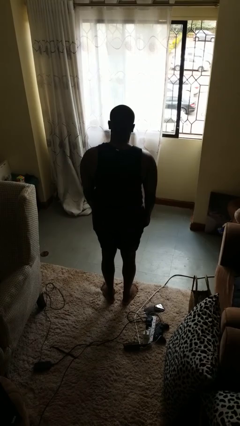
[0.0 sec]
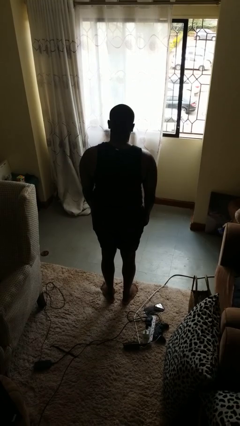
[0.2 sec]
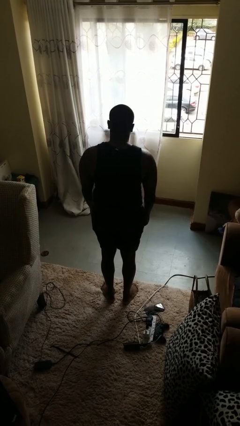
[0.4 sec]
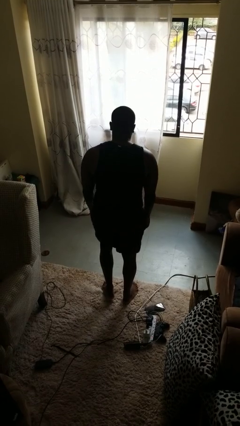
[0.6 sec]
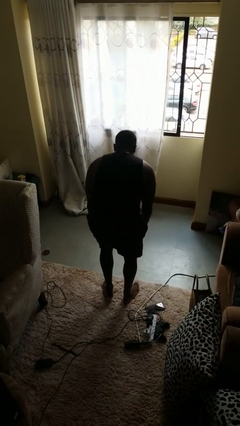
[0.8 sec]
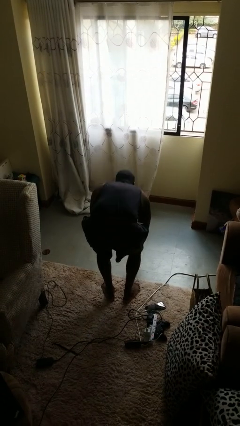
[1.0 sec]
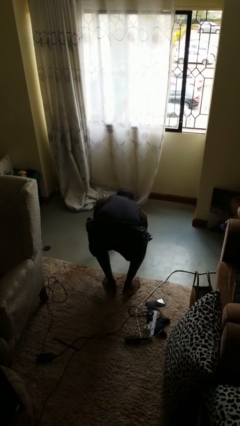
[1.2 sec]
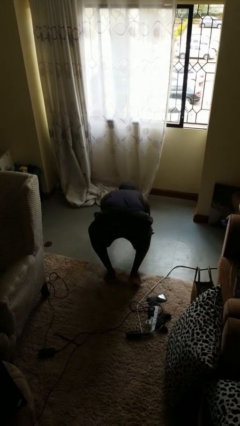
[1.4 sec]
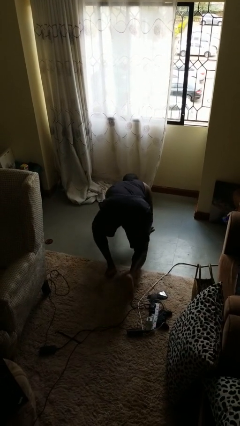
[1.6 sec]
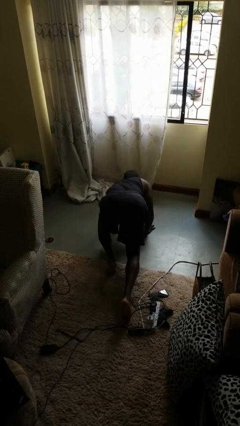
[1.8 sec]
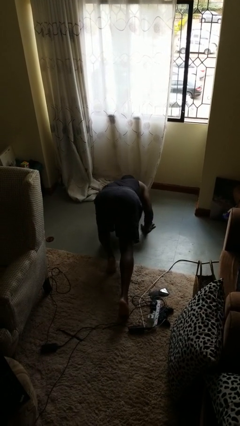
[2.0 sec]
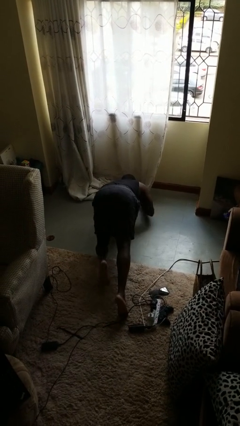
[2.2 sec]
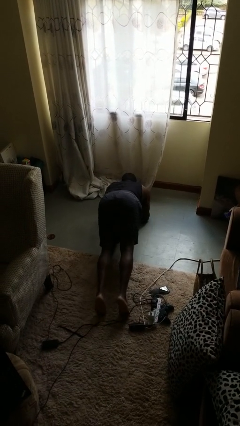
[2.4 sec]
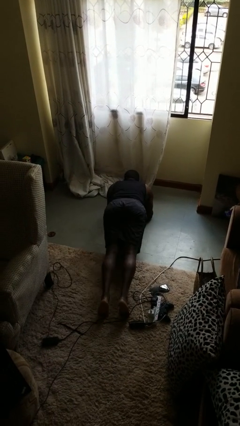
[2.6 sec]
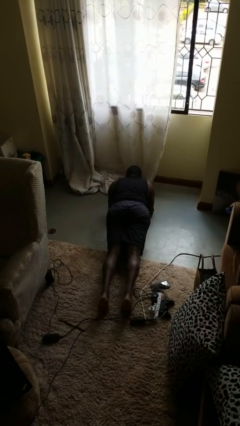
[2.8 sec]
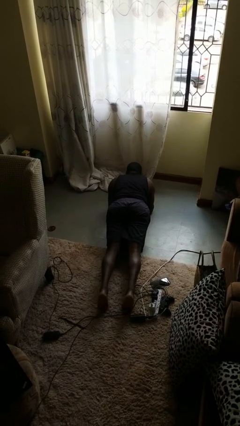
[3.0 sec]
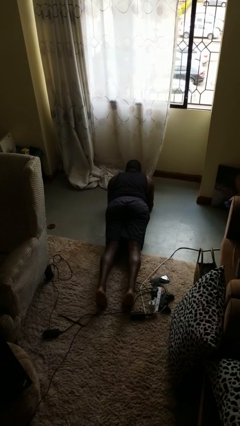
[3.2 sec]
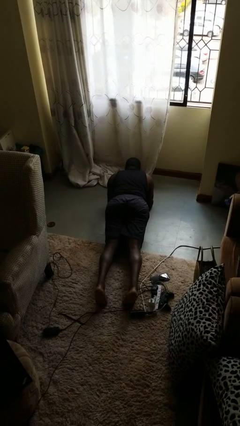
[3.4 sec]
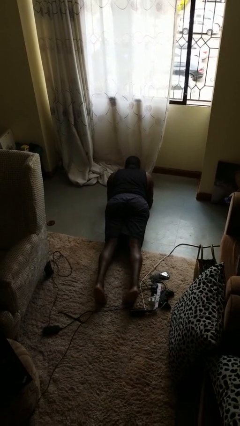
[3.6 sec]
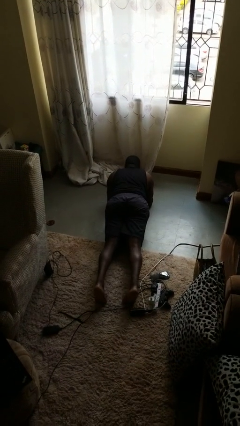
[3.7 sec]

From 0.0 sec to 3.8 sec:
person exercises with plank

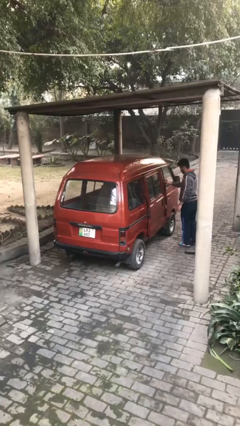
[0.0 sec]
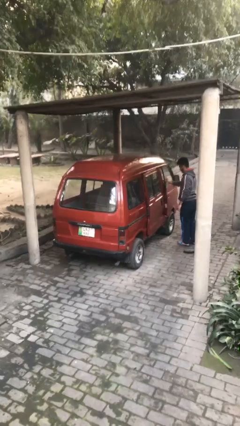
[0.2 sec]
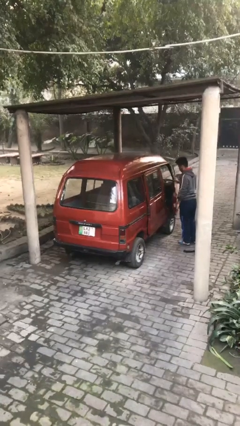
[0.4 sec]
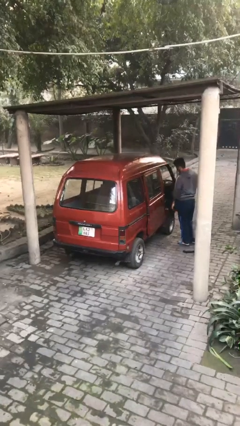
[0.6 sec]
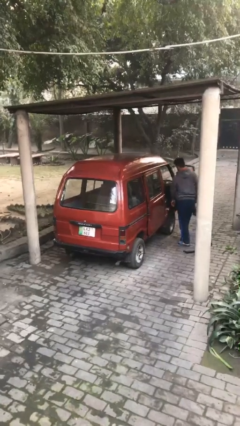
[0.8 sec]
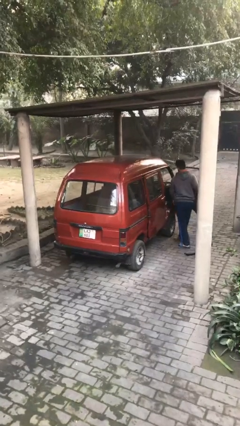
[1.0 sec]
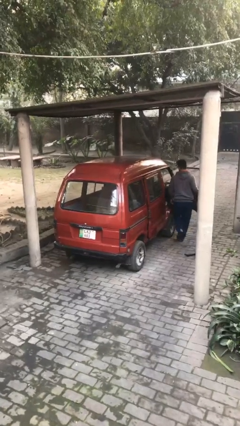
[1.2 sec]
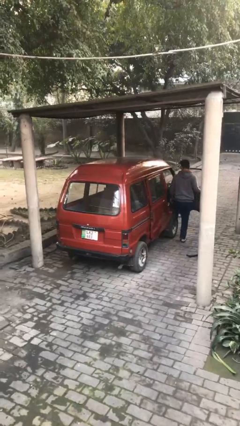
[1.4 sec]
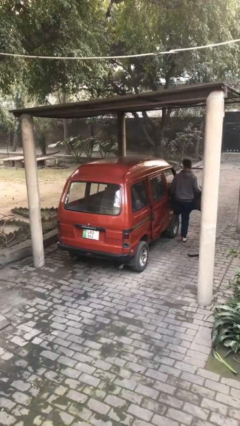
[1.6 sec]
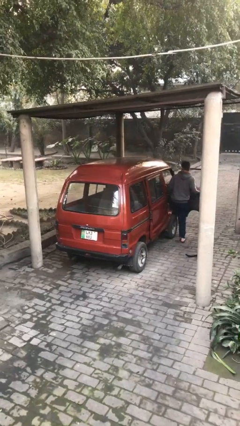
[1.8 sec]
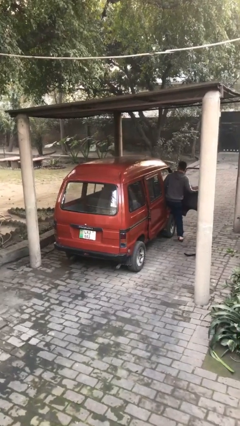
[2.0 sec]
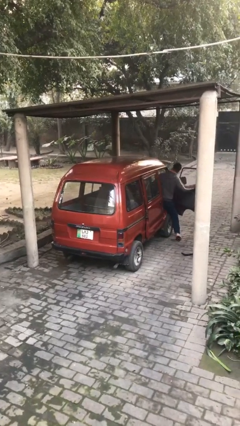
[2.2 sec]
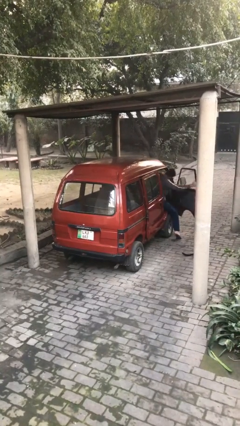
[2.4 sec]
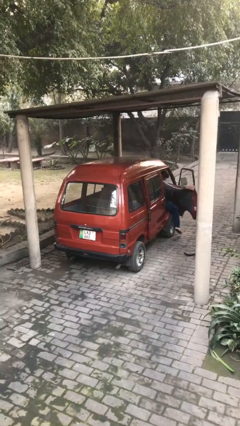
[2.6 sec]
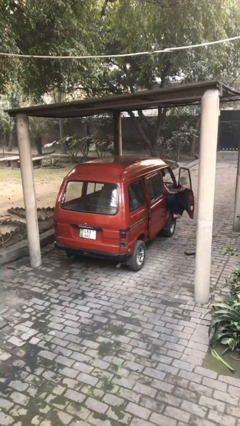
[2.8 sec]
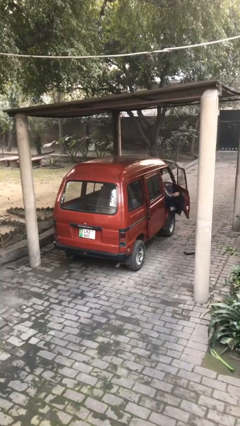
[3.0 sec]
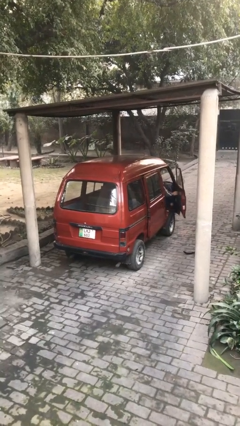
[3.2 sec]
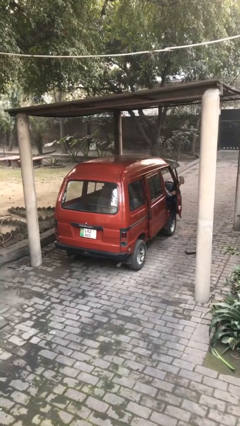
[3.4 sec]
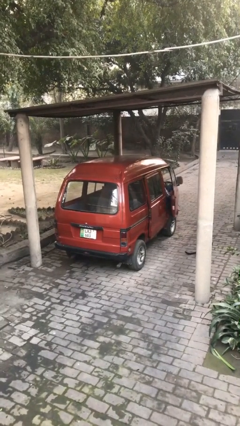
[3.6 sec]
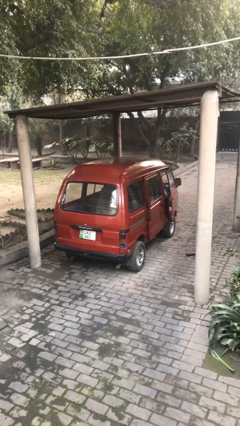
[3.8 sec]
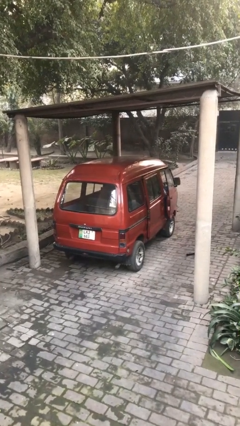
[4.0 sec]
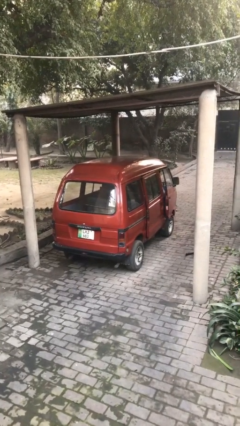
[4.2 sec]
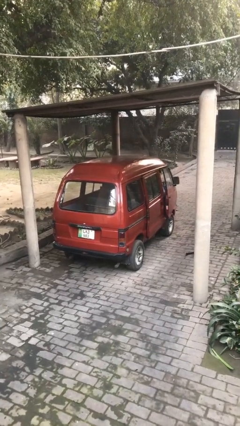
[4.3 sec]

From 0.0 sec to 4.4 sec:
car picks up person

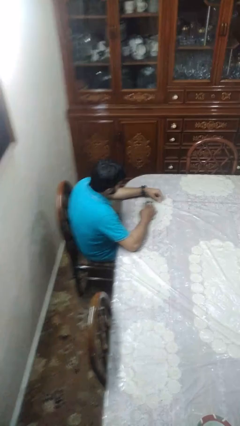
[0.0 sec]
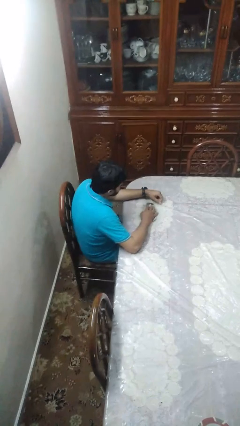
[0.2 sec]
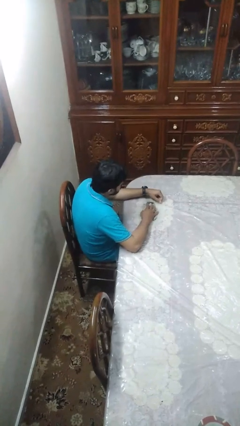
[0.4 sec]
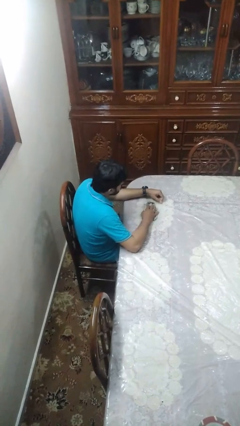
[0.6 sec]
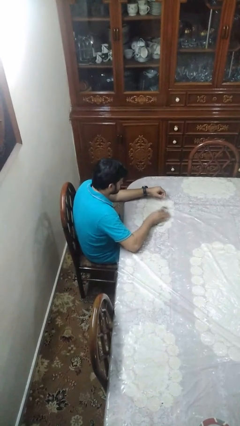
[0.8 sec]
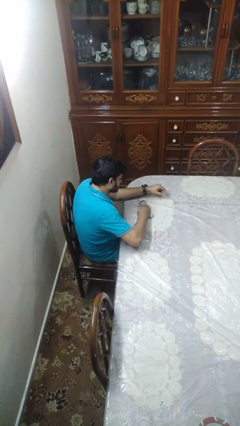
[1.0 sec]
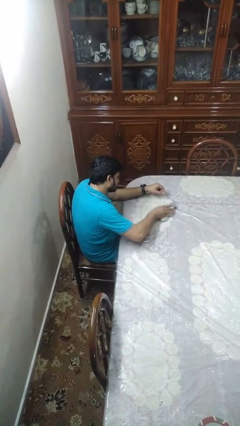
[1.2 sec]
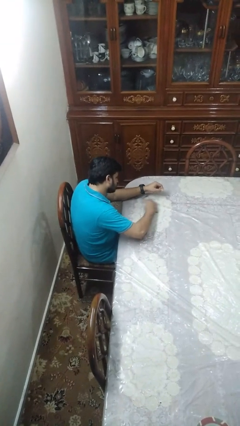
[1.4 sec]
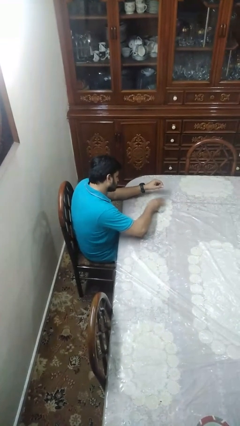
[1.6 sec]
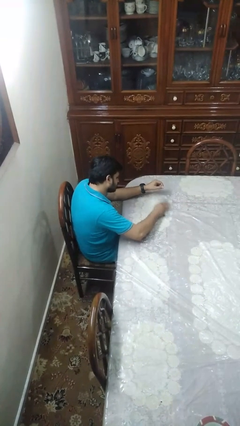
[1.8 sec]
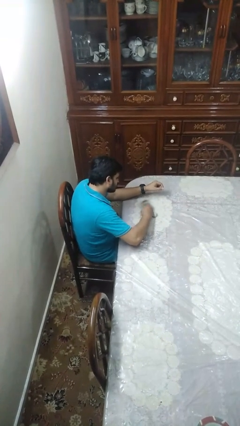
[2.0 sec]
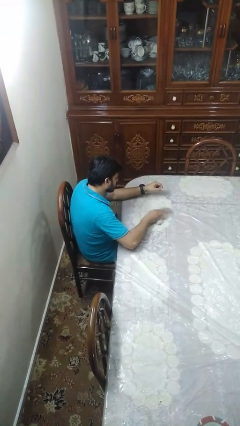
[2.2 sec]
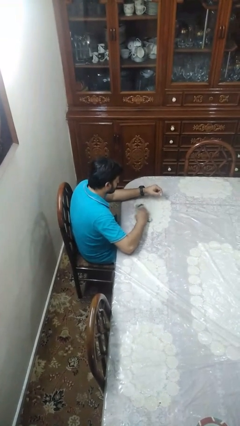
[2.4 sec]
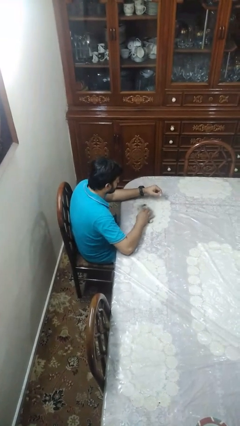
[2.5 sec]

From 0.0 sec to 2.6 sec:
person cleans table with rag

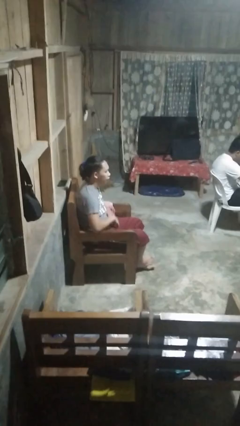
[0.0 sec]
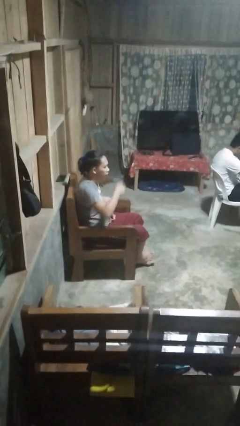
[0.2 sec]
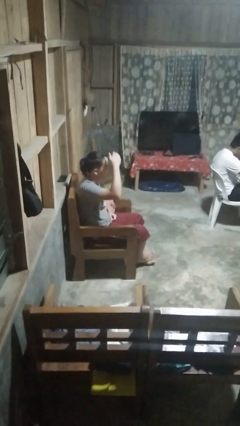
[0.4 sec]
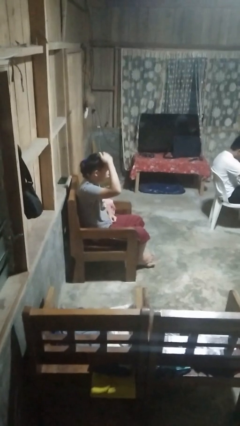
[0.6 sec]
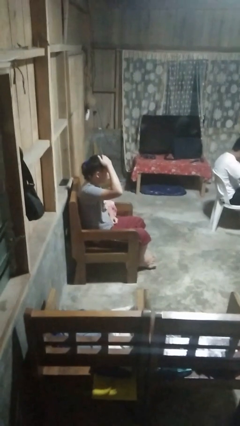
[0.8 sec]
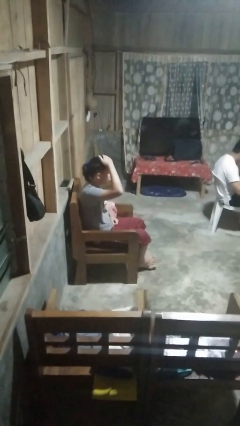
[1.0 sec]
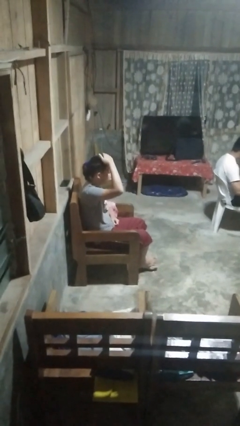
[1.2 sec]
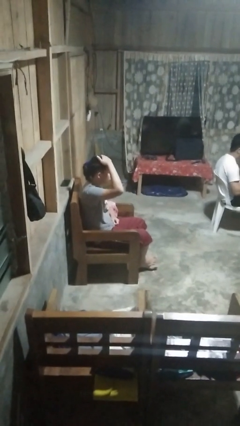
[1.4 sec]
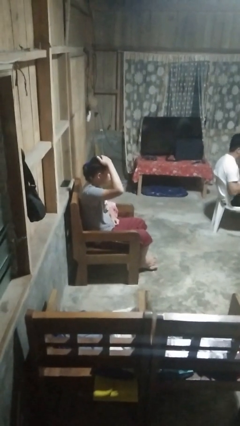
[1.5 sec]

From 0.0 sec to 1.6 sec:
person pats head

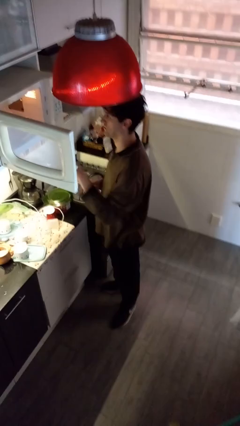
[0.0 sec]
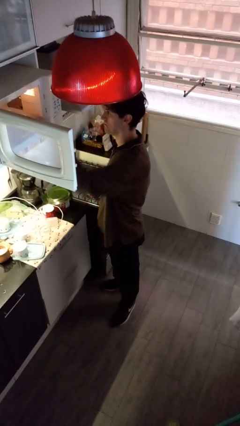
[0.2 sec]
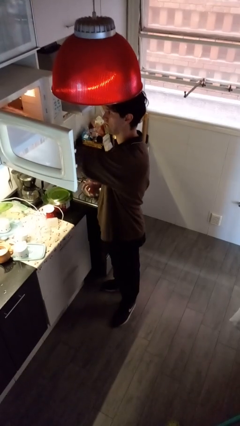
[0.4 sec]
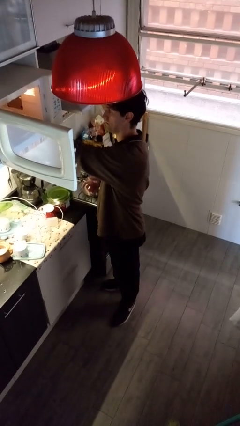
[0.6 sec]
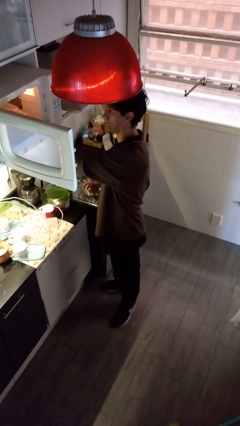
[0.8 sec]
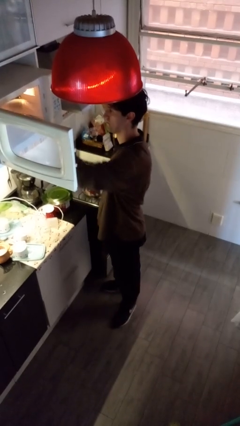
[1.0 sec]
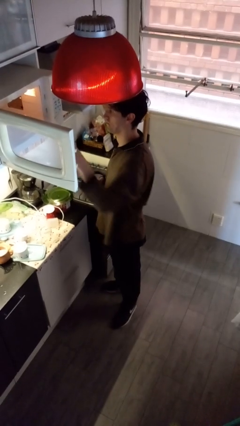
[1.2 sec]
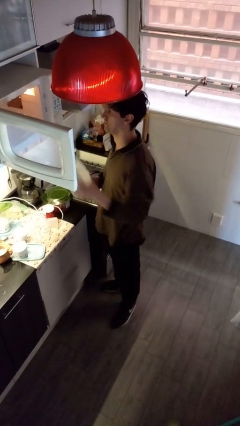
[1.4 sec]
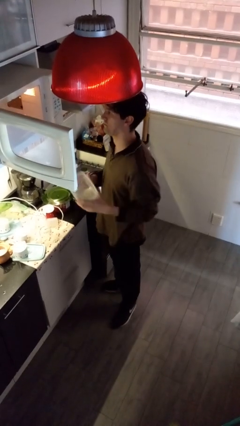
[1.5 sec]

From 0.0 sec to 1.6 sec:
person takes object from microwave

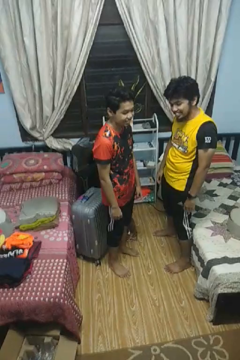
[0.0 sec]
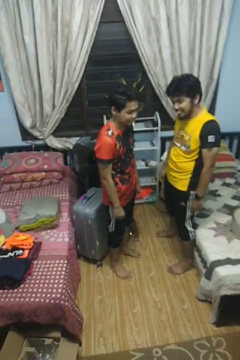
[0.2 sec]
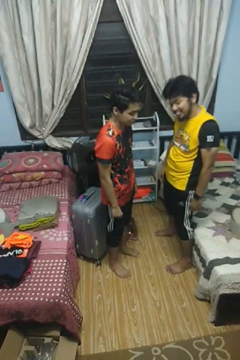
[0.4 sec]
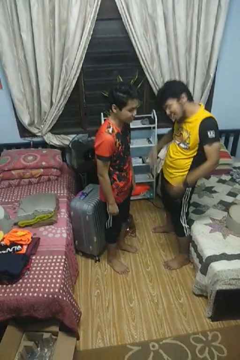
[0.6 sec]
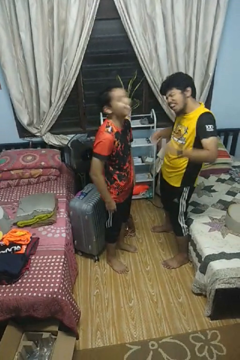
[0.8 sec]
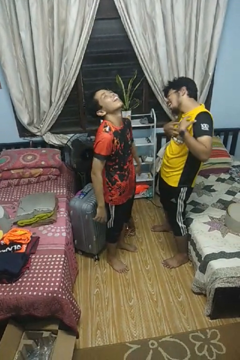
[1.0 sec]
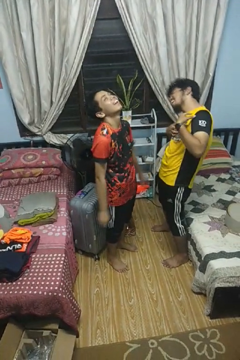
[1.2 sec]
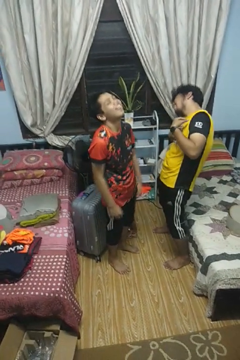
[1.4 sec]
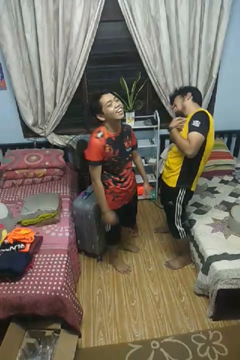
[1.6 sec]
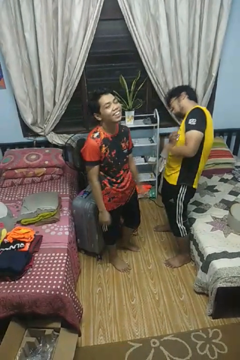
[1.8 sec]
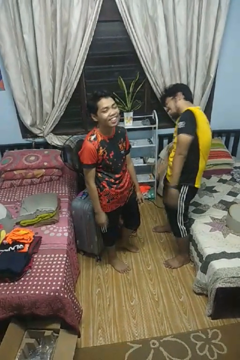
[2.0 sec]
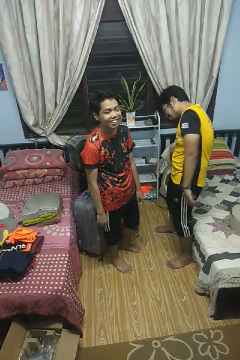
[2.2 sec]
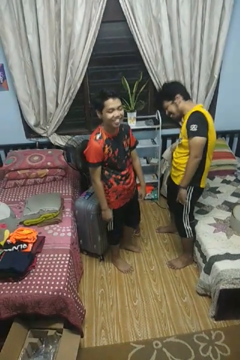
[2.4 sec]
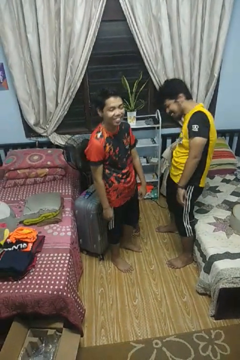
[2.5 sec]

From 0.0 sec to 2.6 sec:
person laughs with person

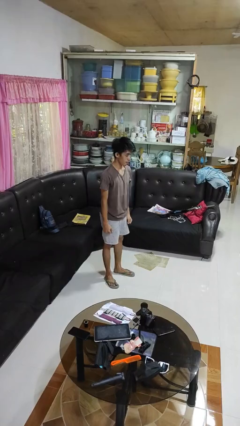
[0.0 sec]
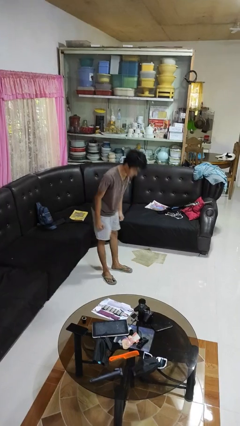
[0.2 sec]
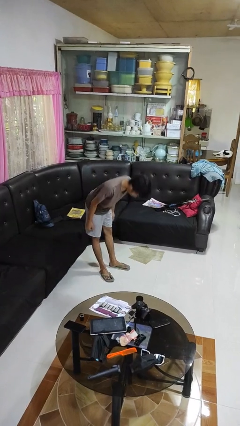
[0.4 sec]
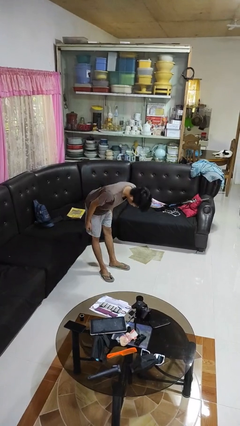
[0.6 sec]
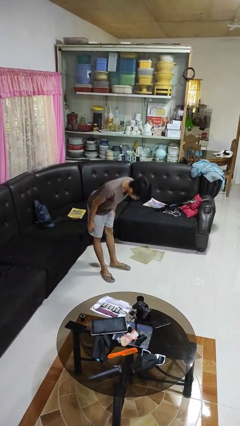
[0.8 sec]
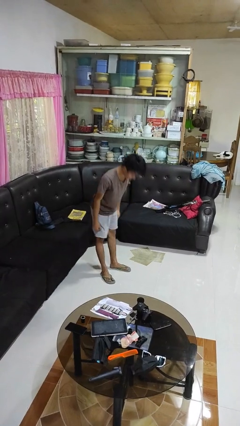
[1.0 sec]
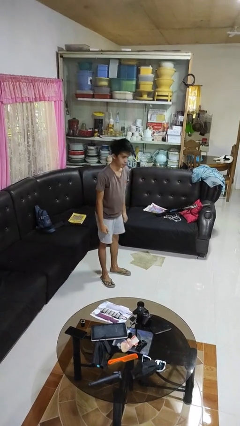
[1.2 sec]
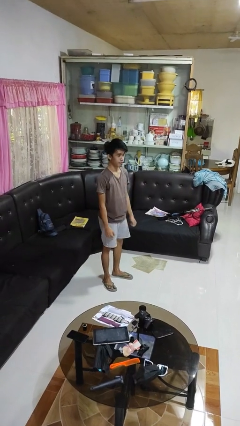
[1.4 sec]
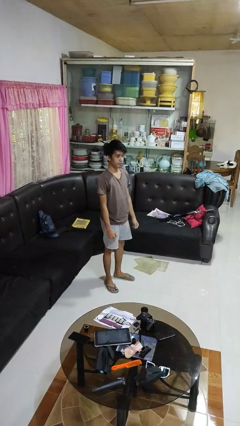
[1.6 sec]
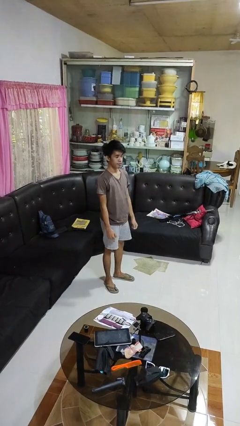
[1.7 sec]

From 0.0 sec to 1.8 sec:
person bows
